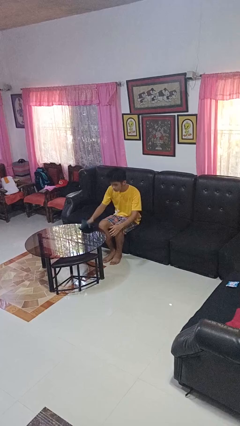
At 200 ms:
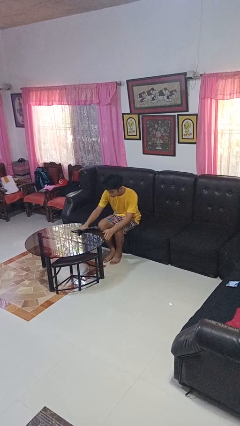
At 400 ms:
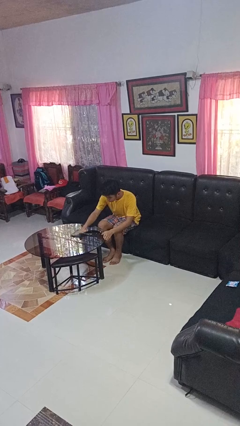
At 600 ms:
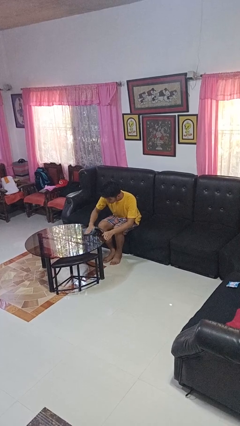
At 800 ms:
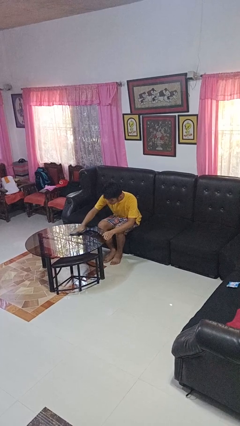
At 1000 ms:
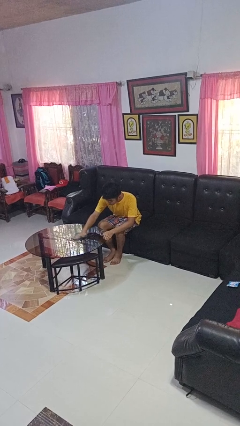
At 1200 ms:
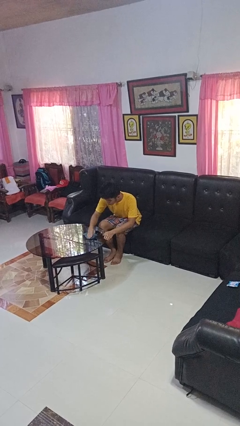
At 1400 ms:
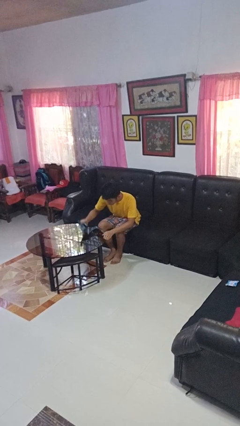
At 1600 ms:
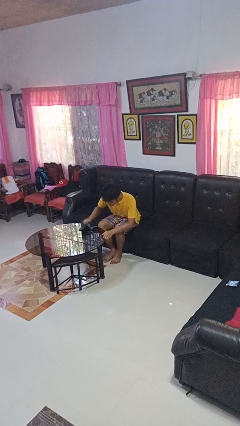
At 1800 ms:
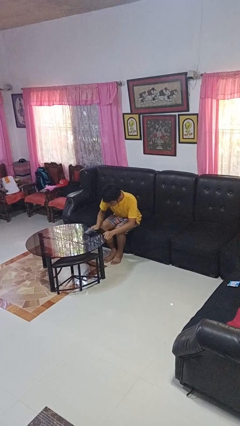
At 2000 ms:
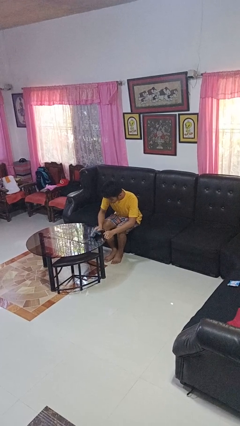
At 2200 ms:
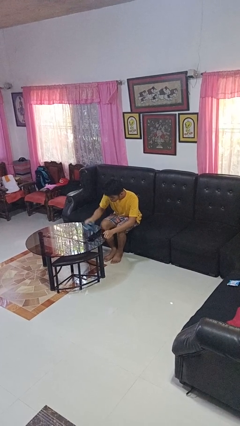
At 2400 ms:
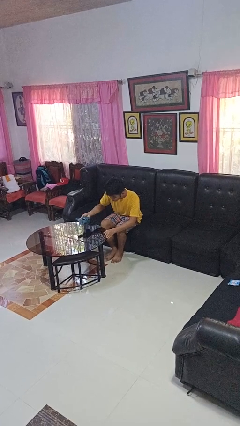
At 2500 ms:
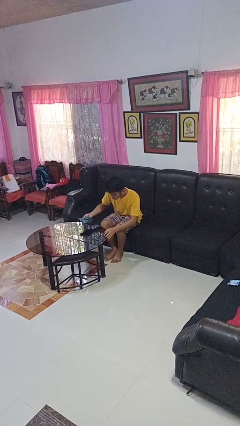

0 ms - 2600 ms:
person cleans table with rag

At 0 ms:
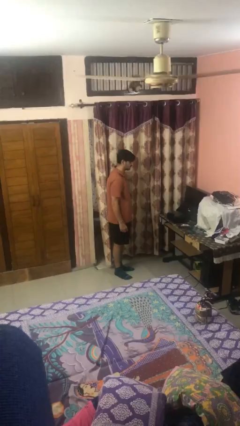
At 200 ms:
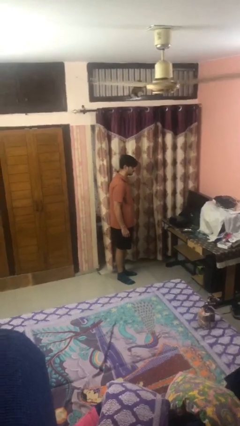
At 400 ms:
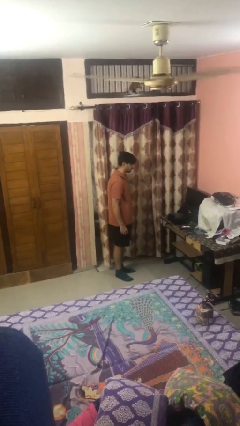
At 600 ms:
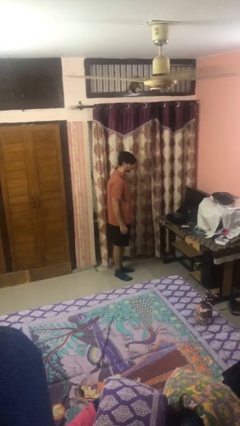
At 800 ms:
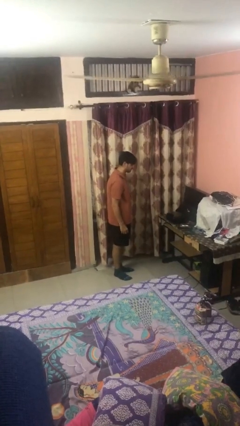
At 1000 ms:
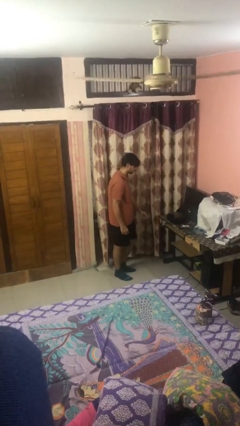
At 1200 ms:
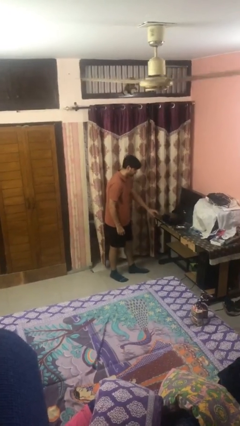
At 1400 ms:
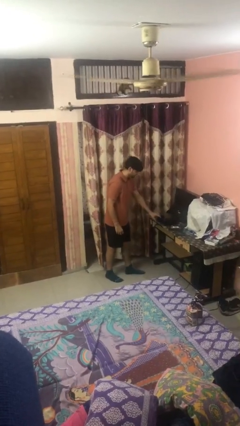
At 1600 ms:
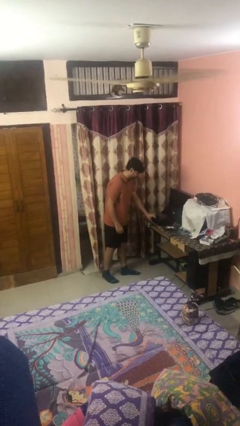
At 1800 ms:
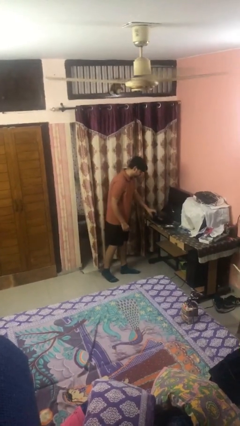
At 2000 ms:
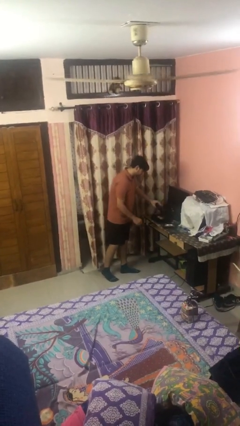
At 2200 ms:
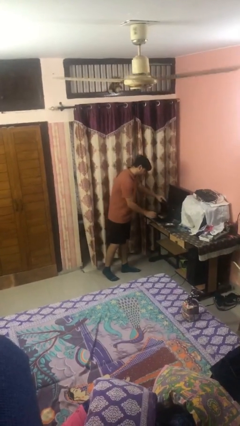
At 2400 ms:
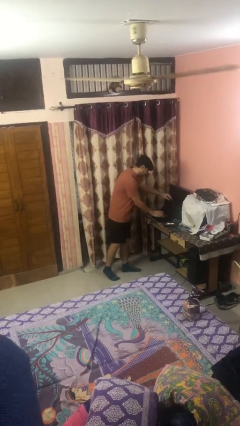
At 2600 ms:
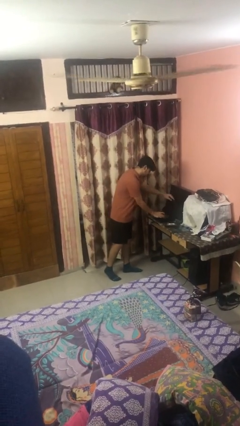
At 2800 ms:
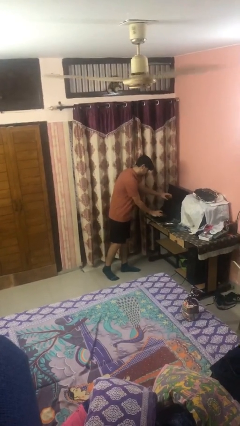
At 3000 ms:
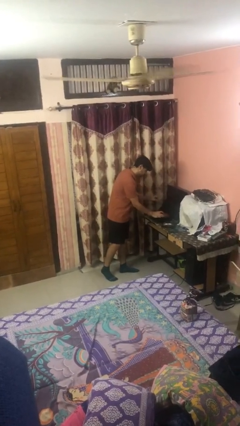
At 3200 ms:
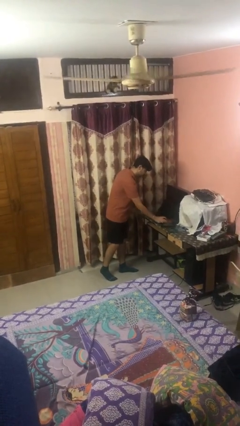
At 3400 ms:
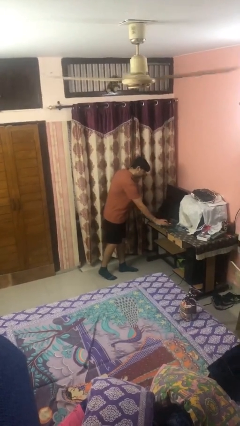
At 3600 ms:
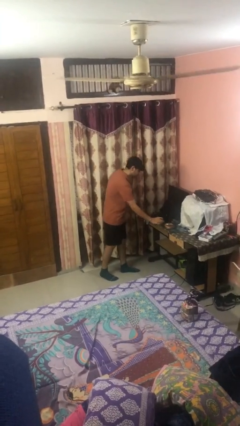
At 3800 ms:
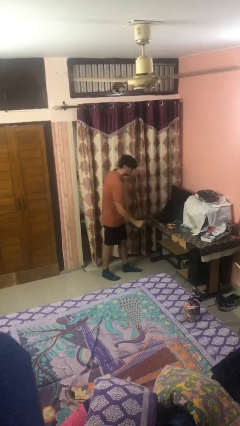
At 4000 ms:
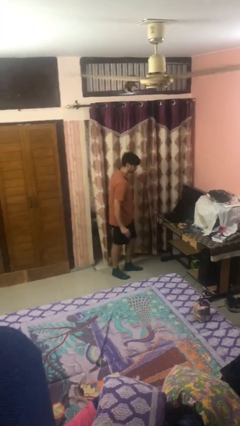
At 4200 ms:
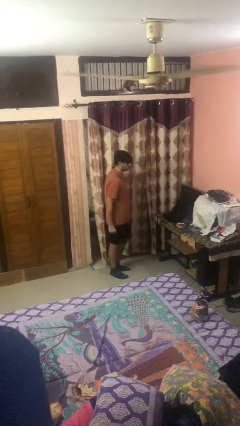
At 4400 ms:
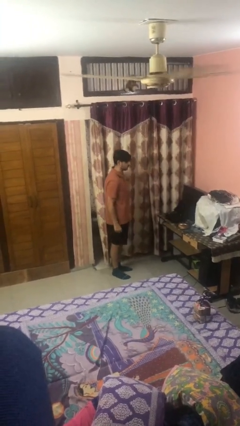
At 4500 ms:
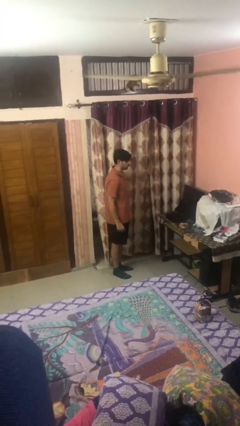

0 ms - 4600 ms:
person takes object from toaster

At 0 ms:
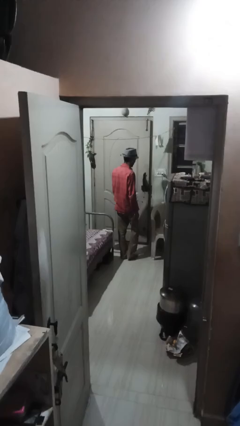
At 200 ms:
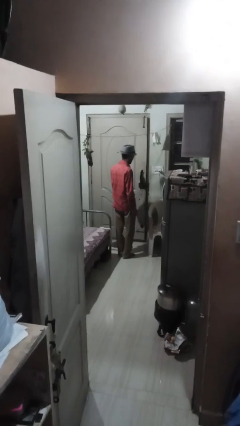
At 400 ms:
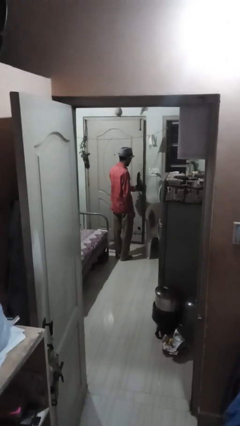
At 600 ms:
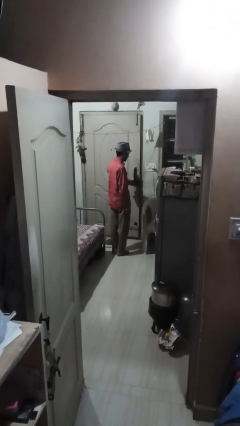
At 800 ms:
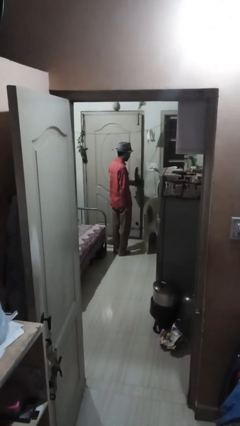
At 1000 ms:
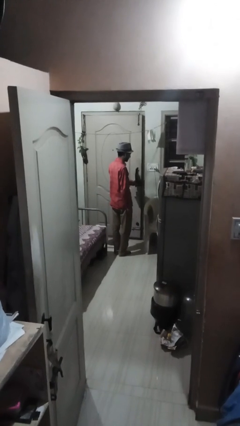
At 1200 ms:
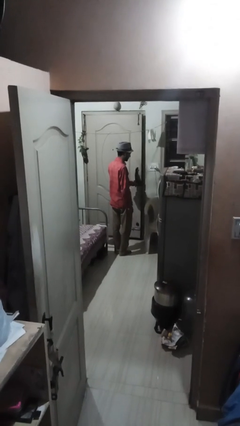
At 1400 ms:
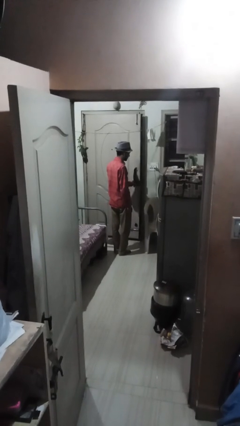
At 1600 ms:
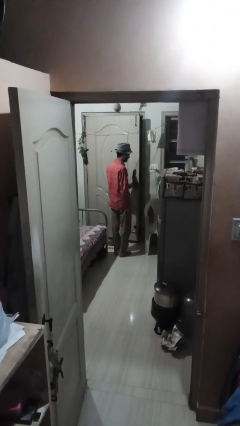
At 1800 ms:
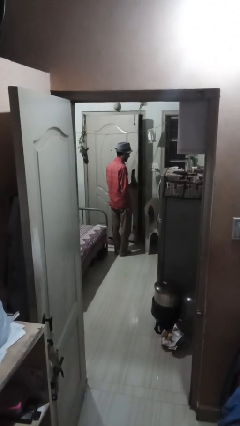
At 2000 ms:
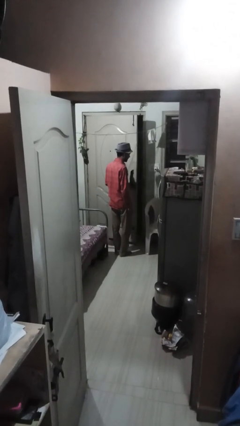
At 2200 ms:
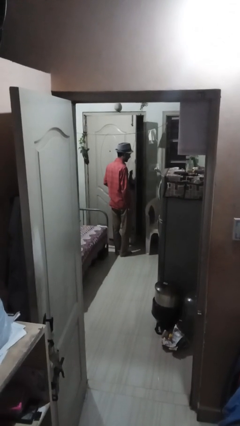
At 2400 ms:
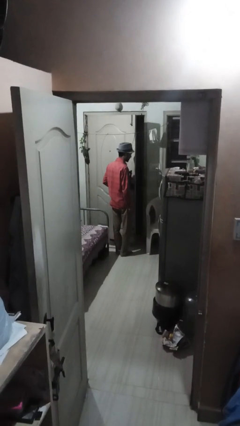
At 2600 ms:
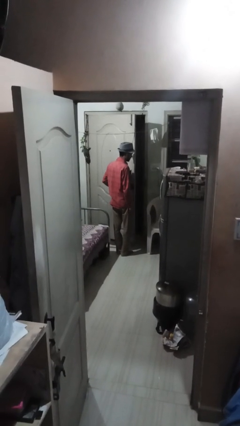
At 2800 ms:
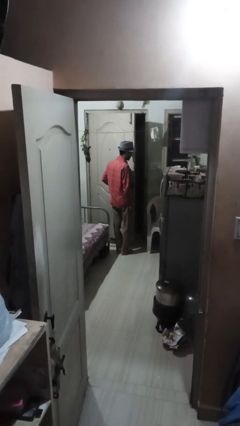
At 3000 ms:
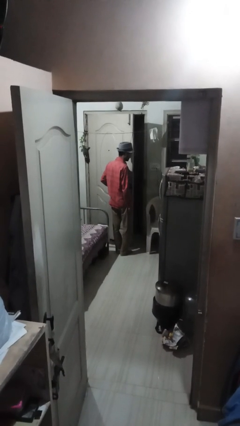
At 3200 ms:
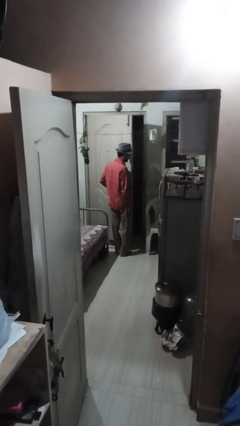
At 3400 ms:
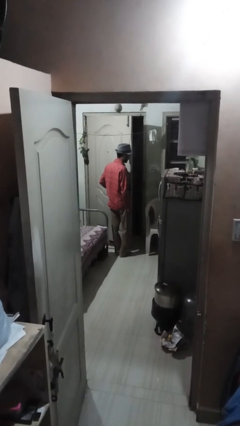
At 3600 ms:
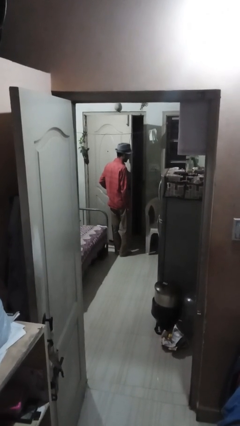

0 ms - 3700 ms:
person opens facility door

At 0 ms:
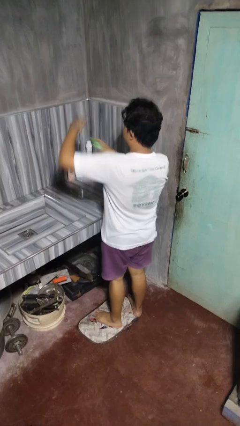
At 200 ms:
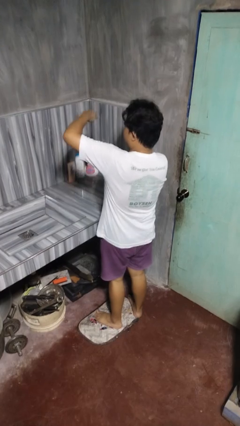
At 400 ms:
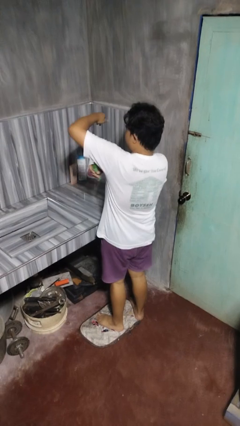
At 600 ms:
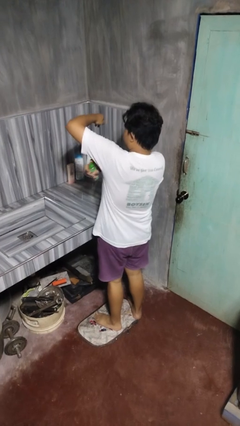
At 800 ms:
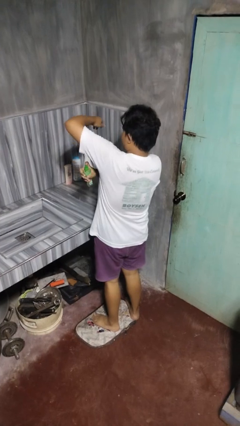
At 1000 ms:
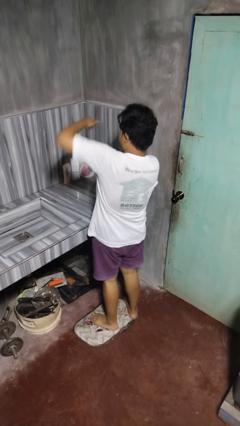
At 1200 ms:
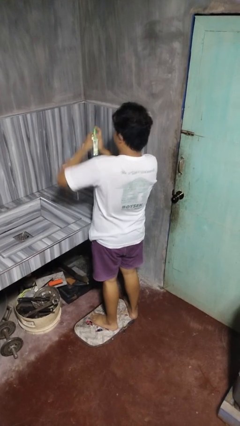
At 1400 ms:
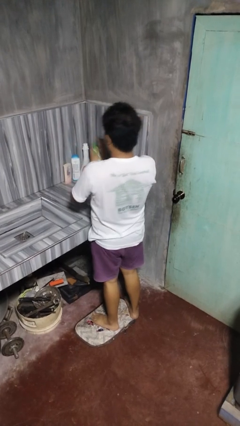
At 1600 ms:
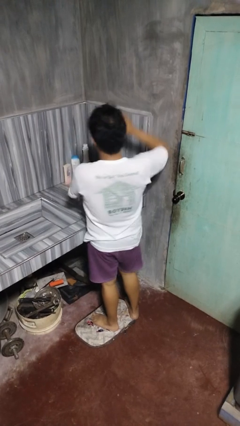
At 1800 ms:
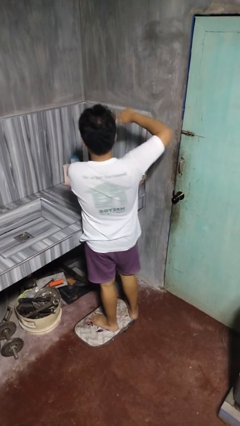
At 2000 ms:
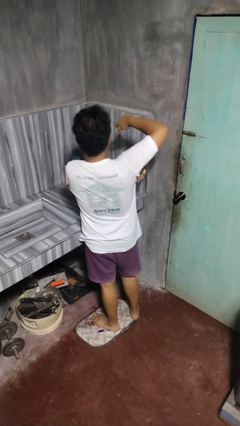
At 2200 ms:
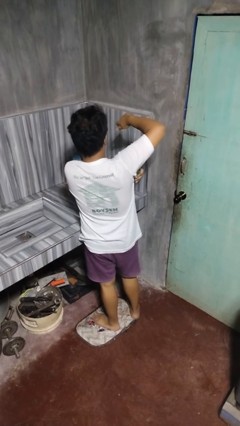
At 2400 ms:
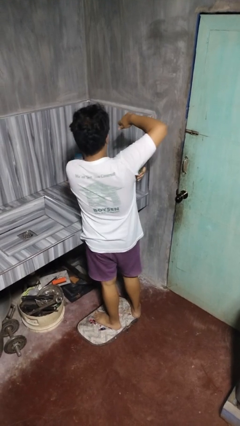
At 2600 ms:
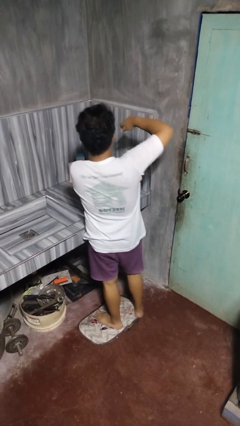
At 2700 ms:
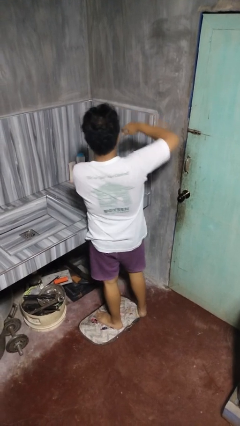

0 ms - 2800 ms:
person applies deodorant

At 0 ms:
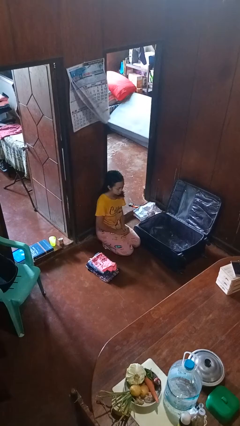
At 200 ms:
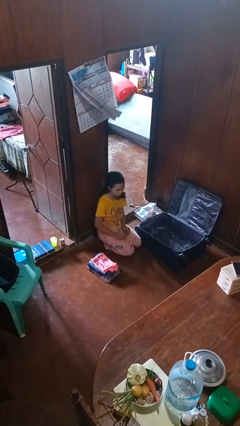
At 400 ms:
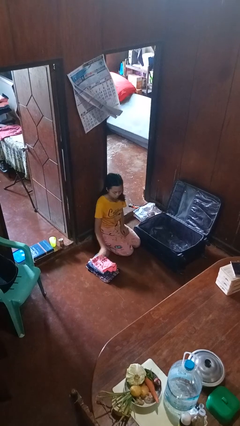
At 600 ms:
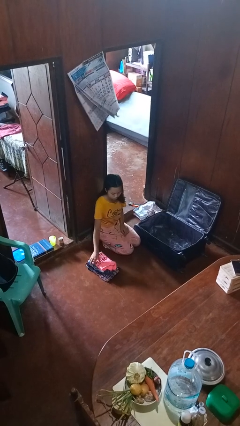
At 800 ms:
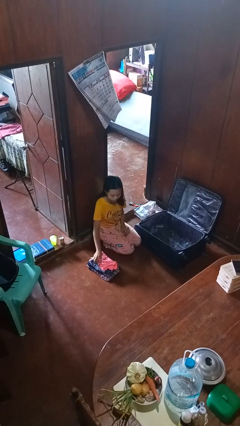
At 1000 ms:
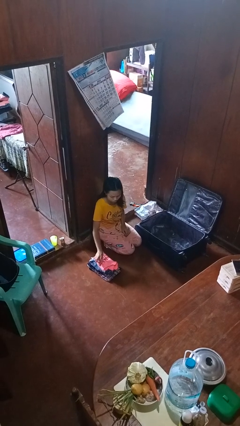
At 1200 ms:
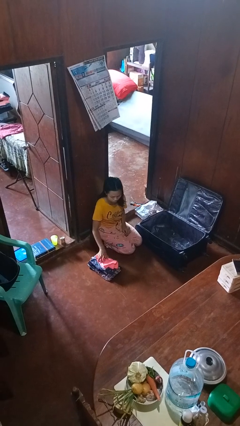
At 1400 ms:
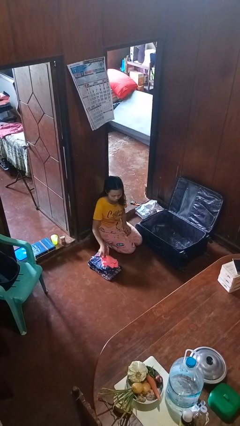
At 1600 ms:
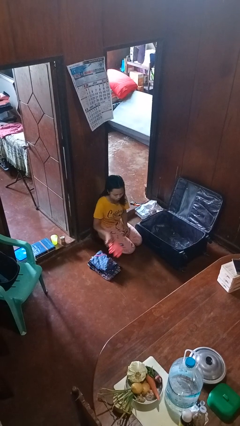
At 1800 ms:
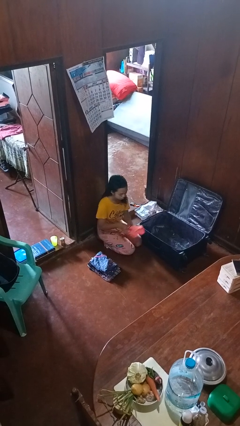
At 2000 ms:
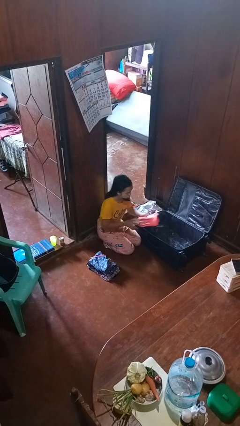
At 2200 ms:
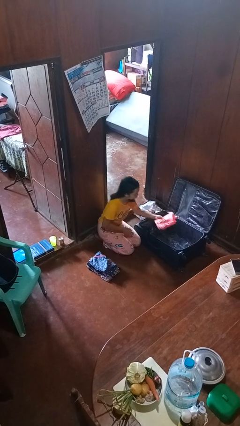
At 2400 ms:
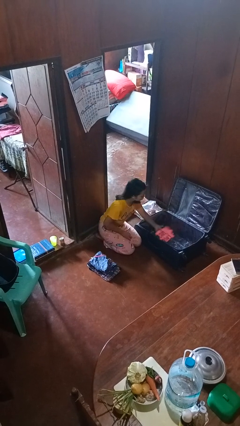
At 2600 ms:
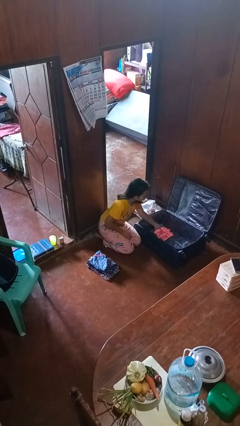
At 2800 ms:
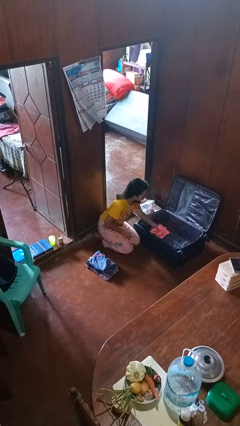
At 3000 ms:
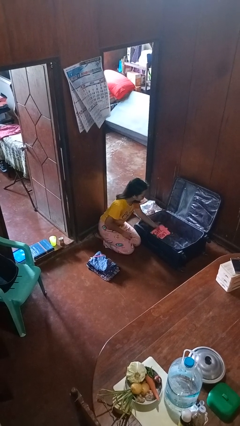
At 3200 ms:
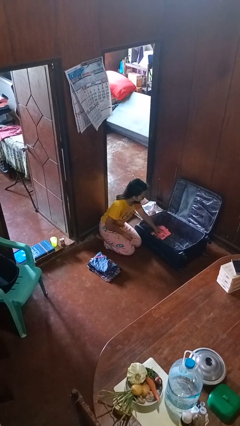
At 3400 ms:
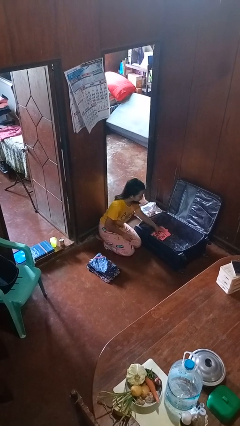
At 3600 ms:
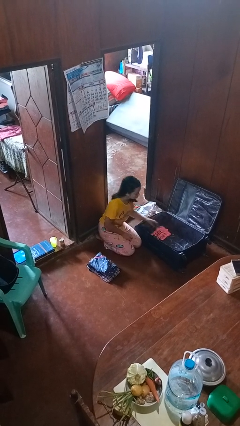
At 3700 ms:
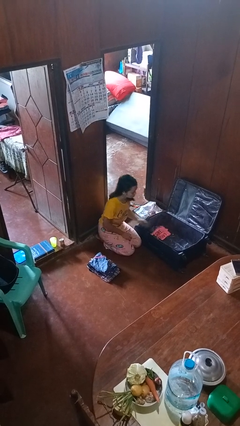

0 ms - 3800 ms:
person loads clothes into suitcase

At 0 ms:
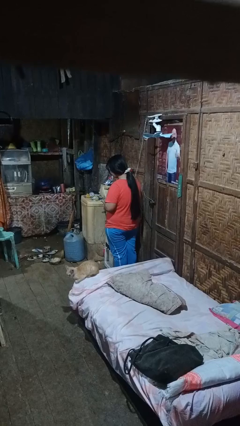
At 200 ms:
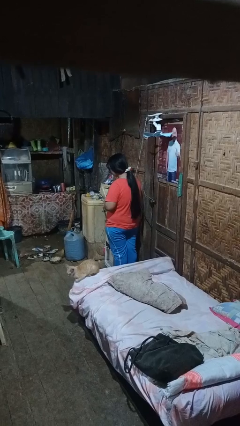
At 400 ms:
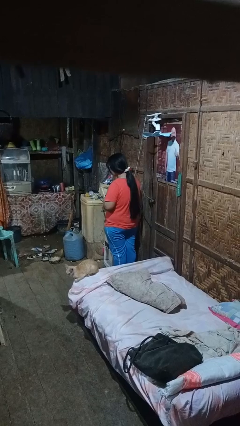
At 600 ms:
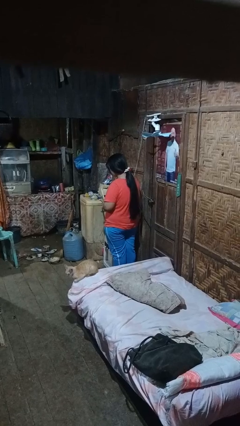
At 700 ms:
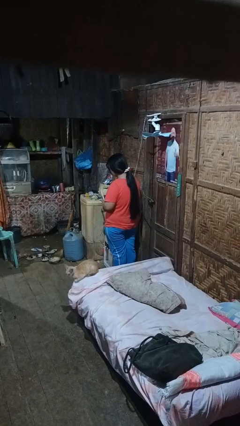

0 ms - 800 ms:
person extinguishes candle
